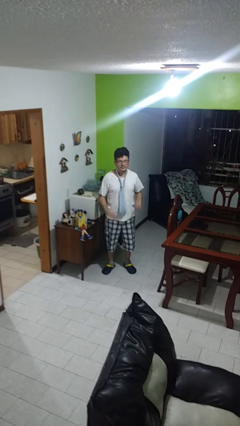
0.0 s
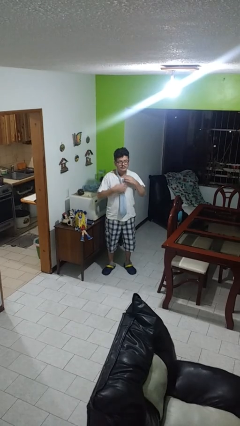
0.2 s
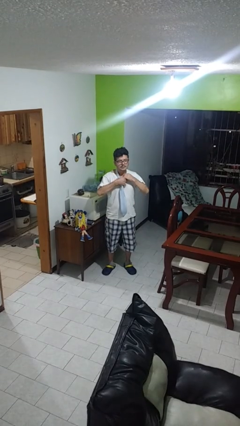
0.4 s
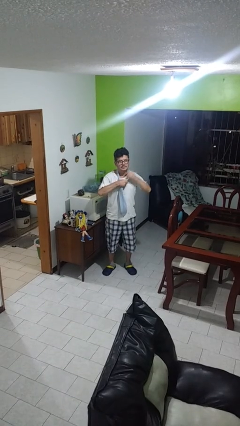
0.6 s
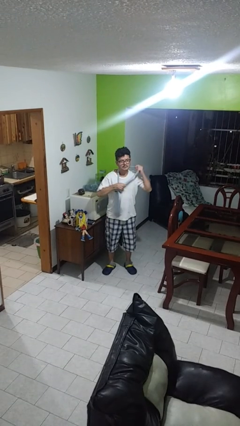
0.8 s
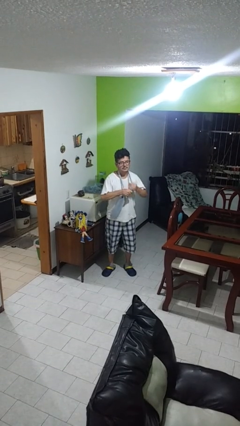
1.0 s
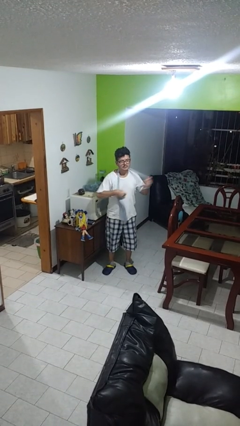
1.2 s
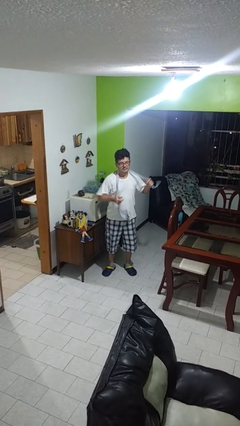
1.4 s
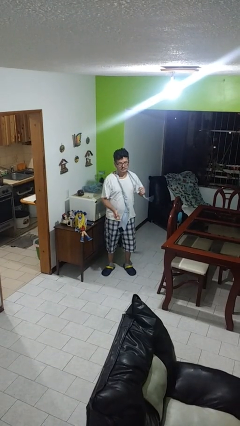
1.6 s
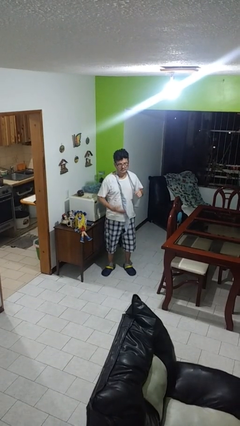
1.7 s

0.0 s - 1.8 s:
person takes off necktie

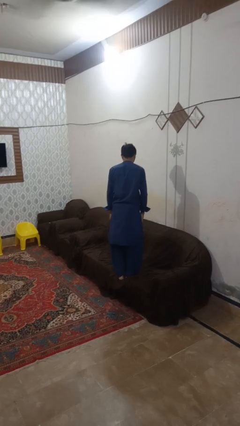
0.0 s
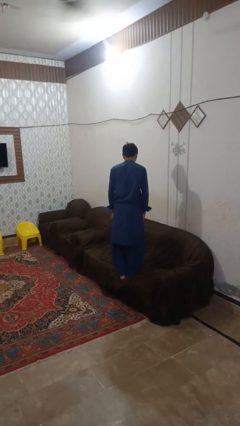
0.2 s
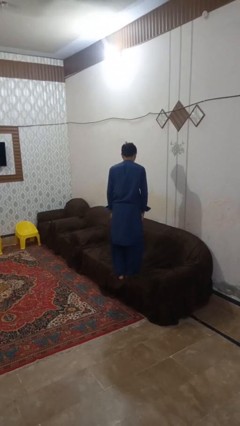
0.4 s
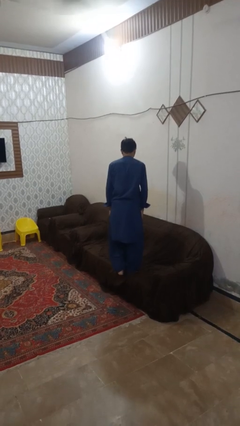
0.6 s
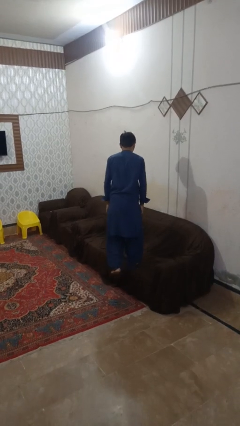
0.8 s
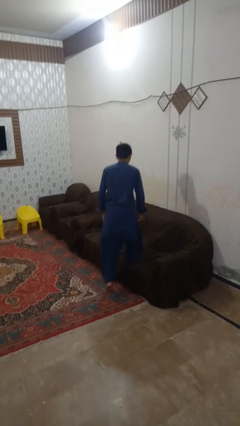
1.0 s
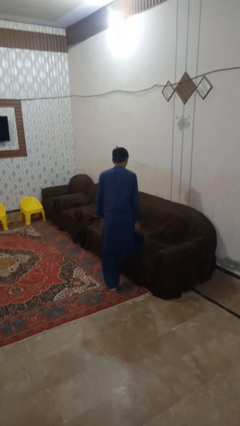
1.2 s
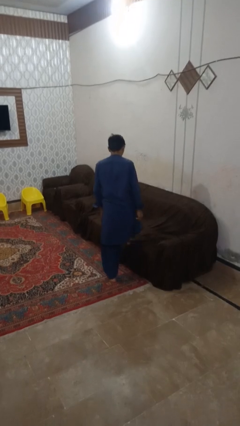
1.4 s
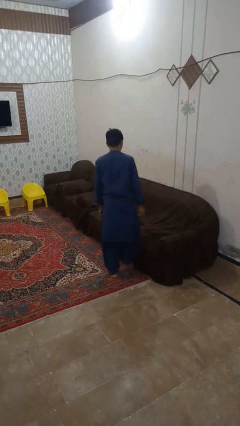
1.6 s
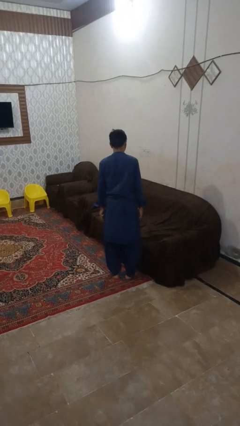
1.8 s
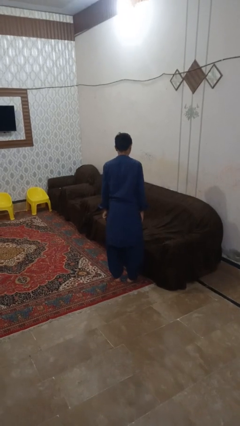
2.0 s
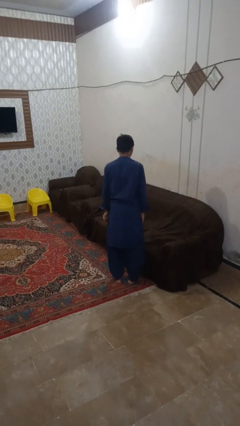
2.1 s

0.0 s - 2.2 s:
person climbs off couch

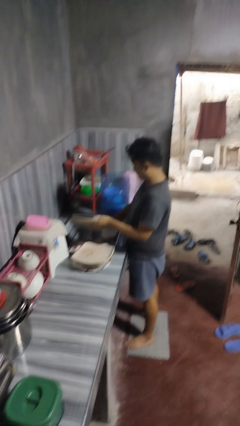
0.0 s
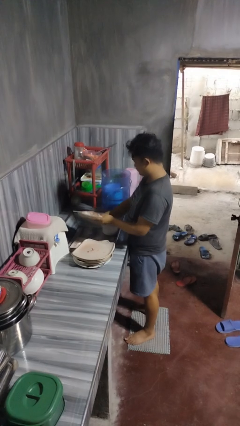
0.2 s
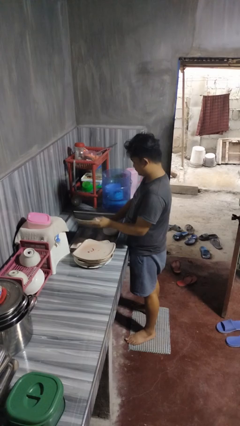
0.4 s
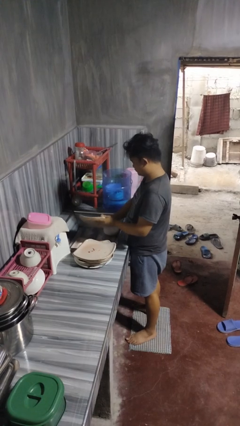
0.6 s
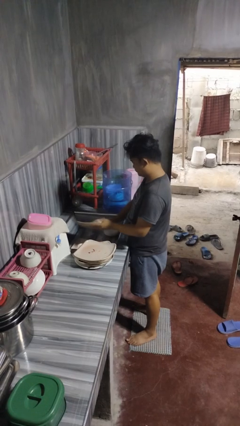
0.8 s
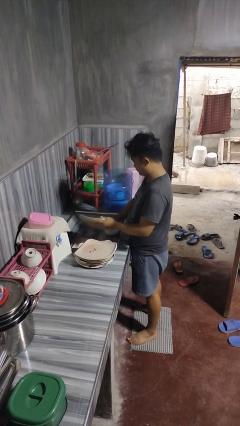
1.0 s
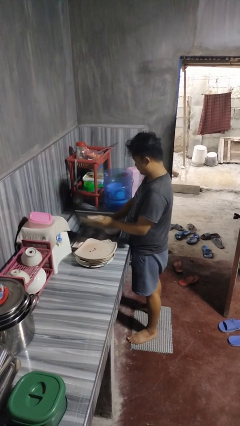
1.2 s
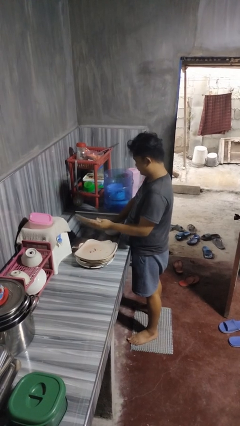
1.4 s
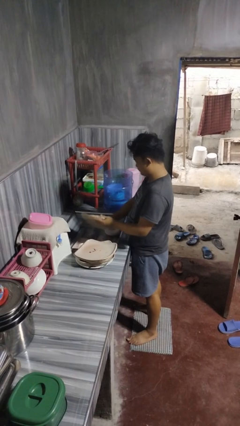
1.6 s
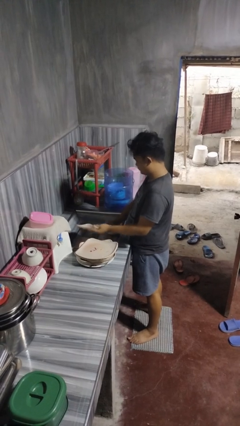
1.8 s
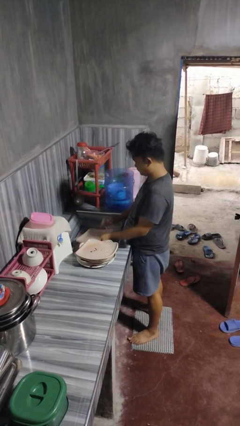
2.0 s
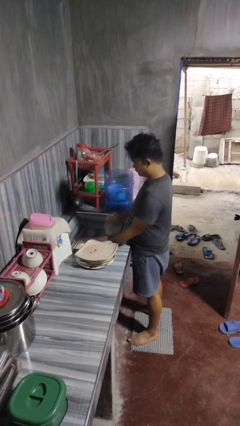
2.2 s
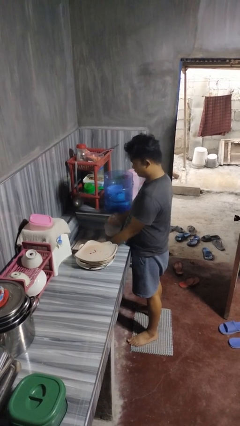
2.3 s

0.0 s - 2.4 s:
person washes dish

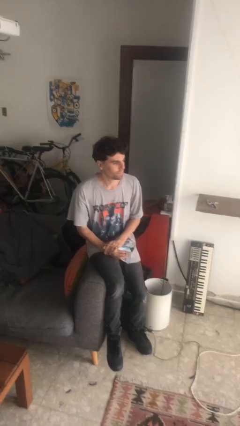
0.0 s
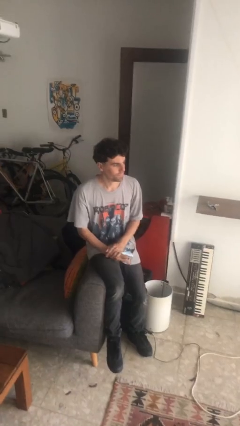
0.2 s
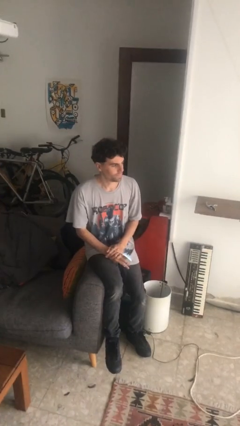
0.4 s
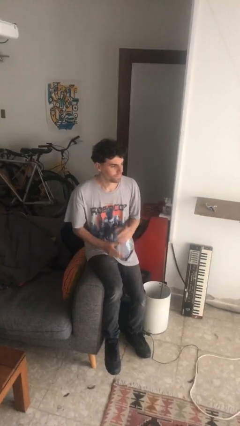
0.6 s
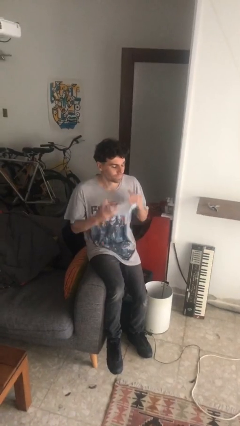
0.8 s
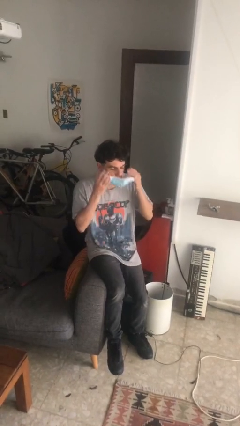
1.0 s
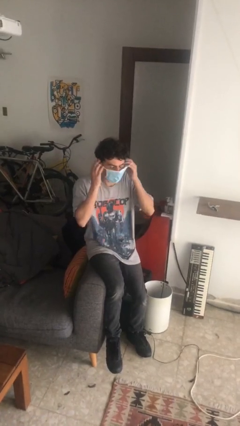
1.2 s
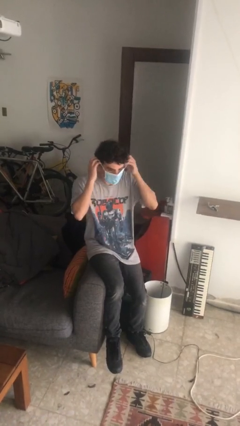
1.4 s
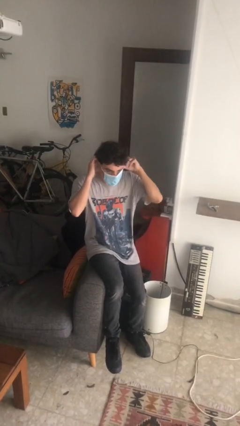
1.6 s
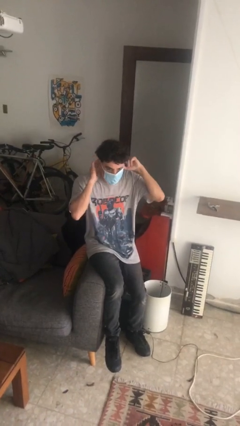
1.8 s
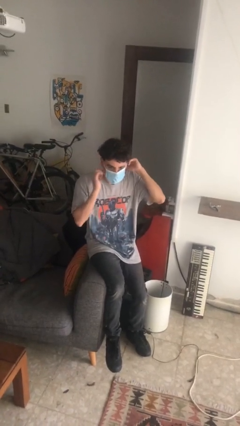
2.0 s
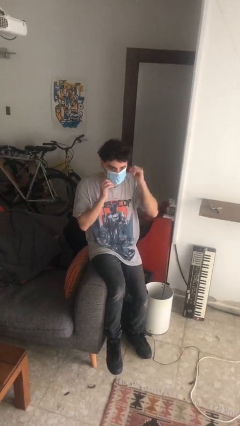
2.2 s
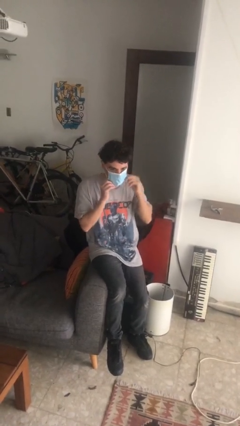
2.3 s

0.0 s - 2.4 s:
person puts on facemask

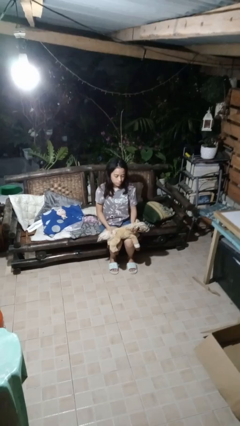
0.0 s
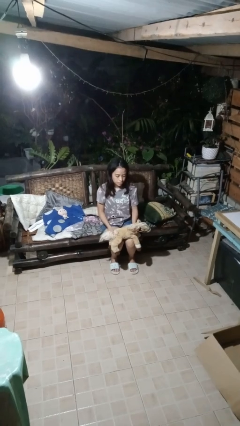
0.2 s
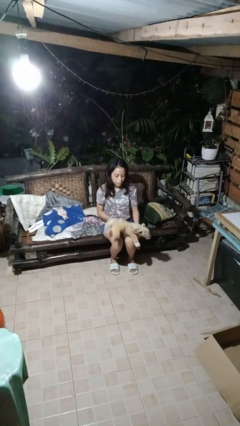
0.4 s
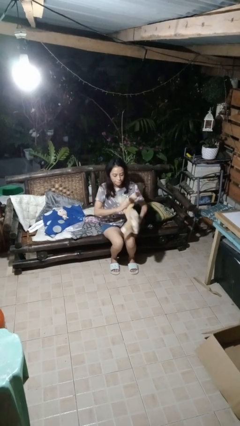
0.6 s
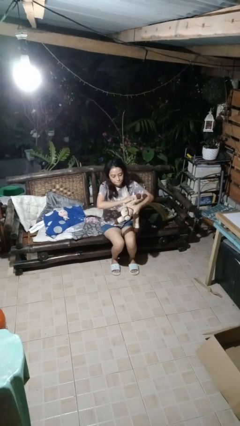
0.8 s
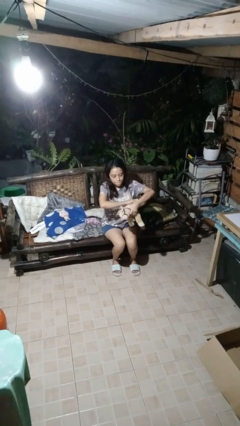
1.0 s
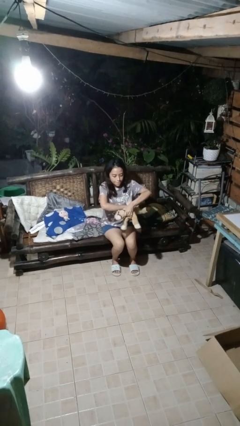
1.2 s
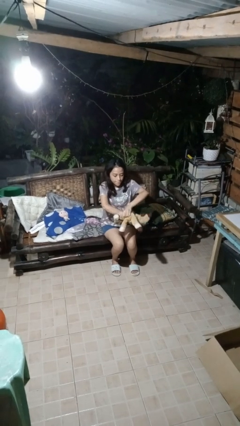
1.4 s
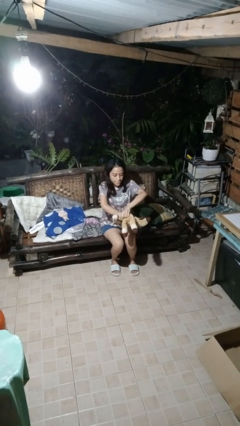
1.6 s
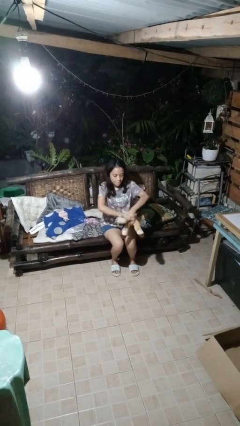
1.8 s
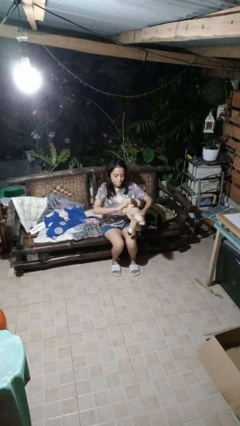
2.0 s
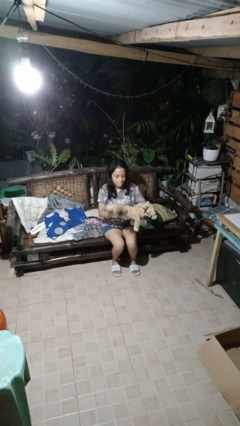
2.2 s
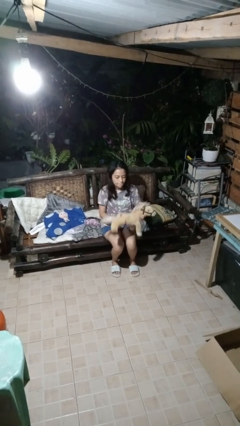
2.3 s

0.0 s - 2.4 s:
person squeezes object

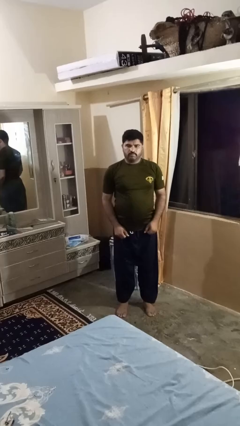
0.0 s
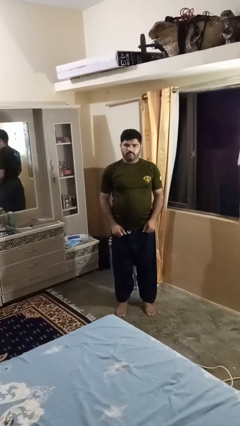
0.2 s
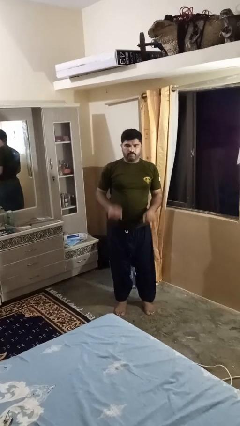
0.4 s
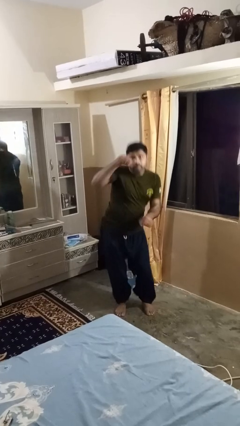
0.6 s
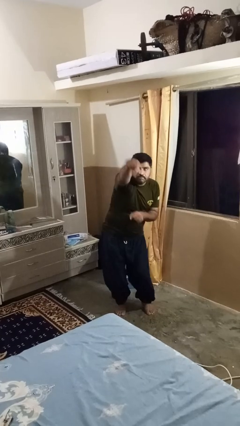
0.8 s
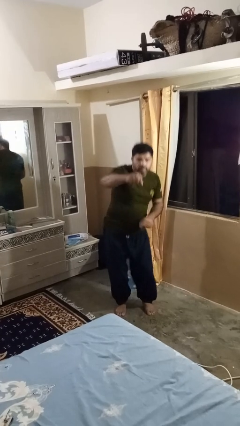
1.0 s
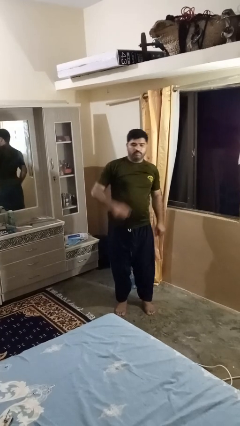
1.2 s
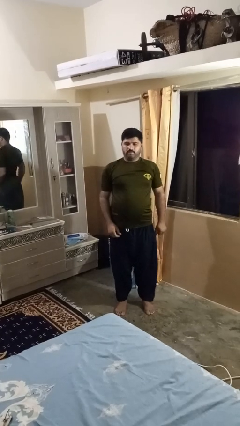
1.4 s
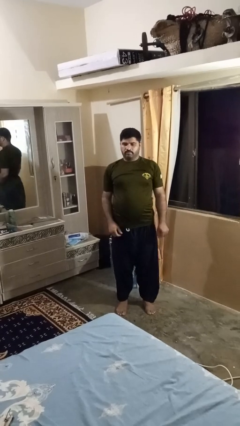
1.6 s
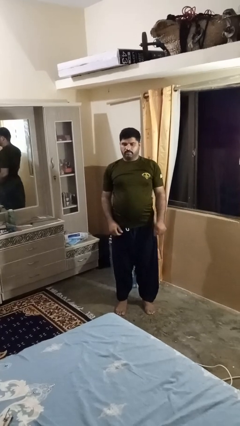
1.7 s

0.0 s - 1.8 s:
person karate chop

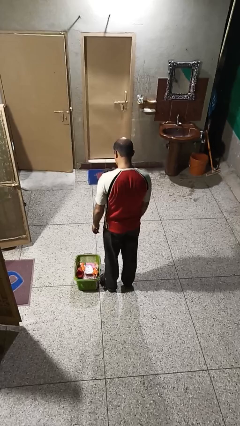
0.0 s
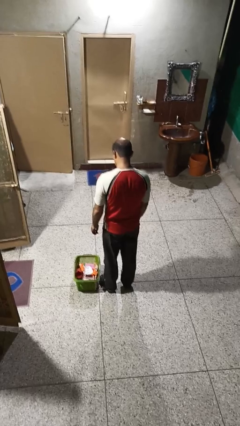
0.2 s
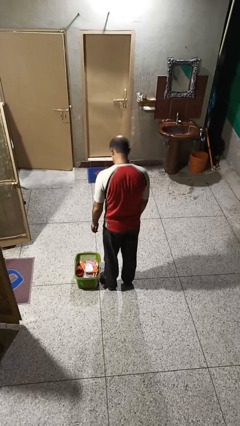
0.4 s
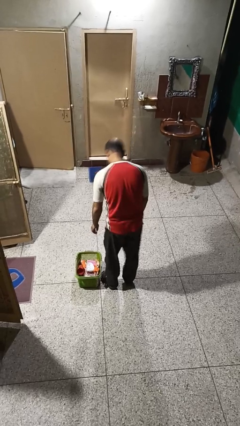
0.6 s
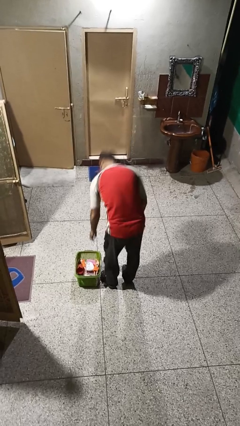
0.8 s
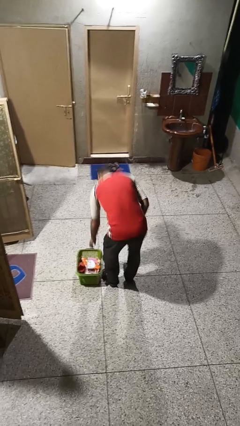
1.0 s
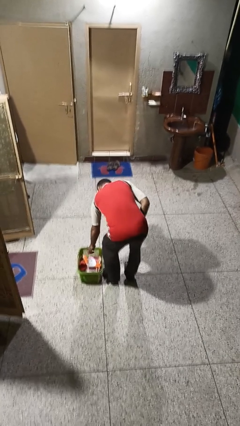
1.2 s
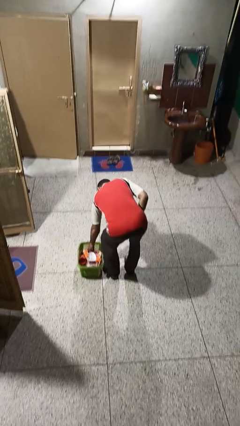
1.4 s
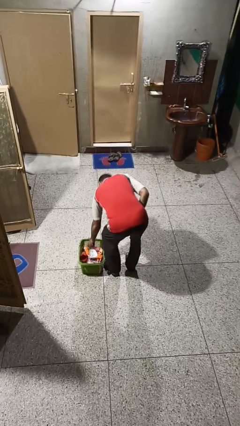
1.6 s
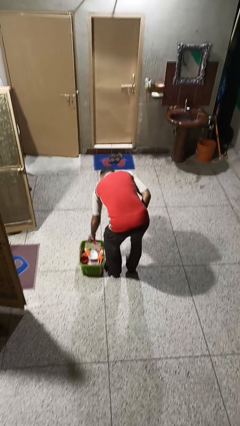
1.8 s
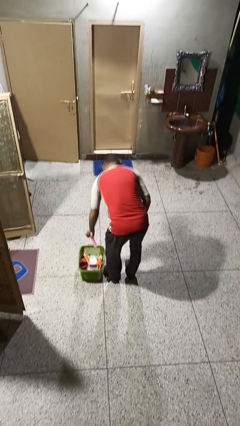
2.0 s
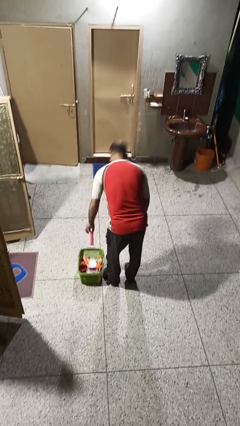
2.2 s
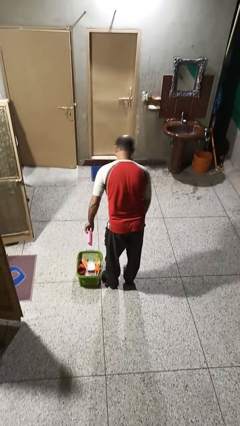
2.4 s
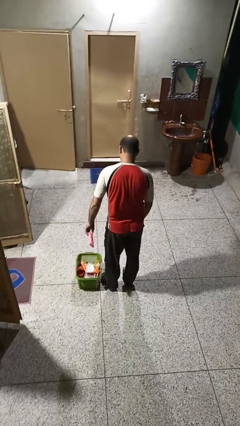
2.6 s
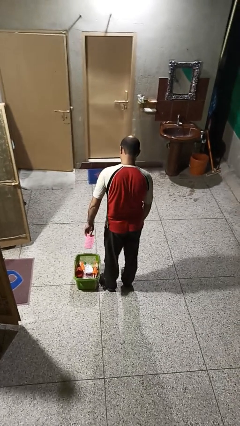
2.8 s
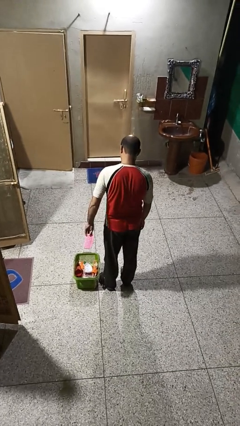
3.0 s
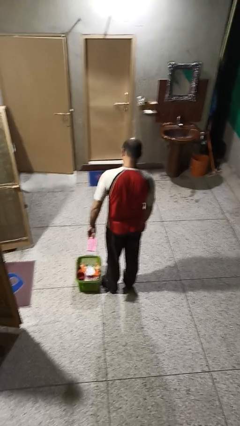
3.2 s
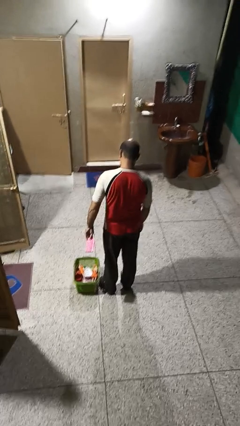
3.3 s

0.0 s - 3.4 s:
person takes object from basket

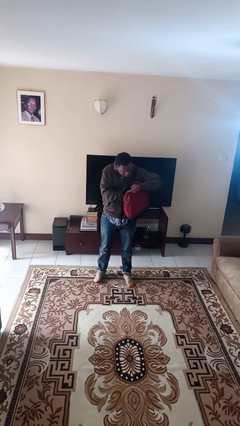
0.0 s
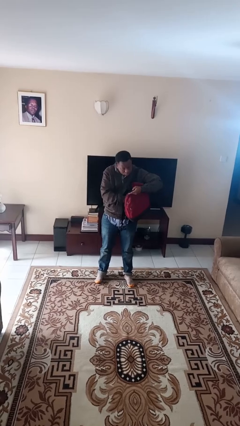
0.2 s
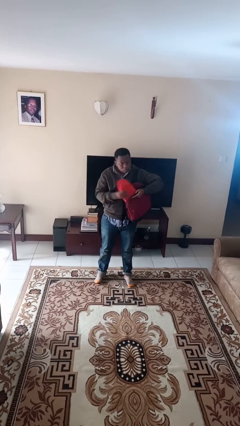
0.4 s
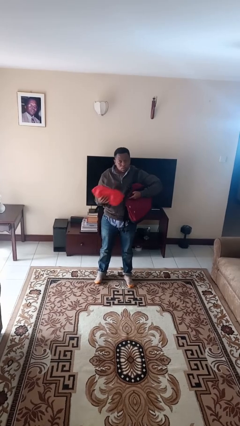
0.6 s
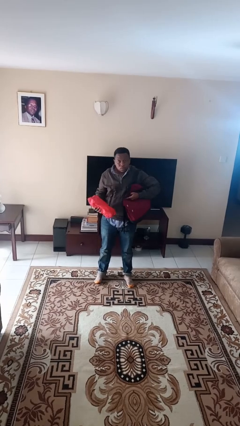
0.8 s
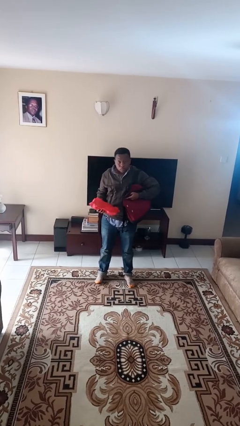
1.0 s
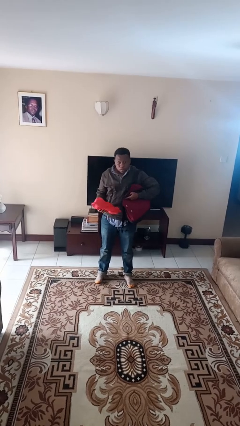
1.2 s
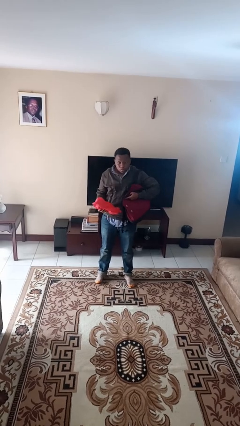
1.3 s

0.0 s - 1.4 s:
person takes object from backpack
